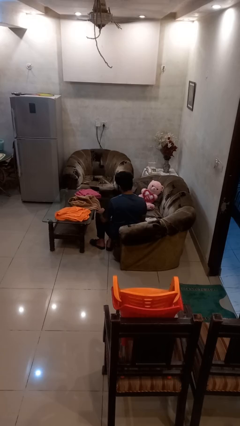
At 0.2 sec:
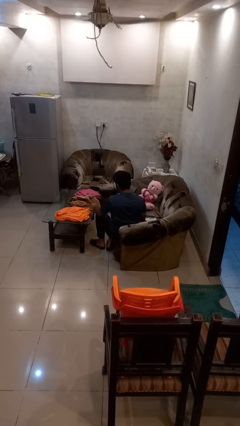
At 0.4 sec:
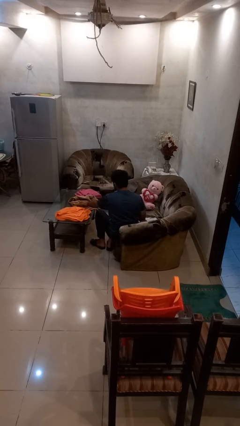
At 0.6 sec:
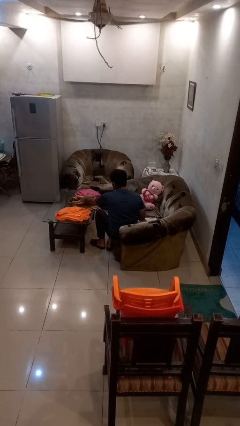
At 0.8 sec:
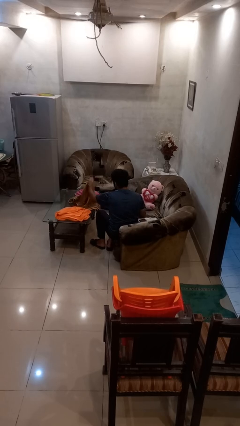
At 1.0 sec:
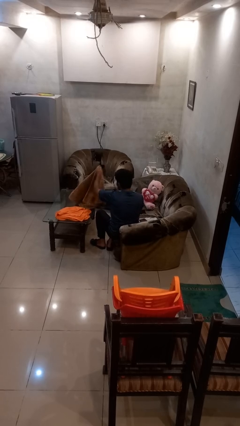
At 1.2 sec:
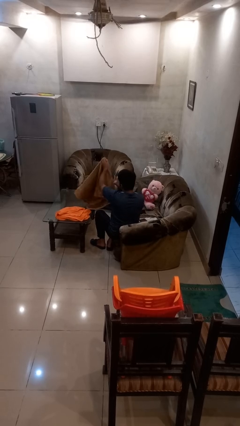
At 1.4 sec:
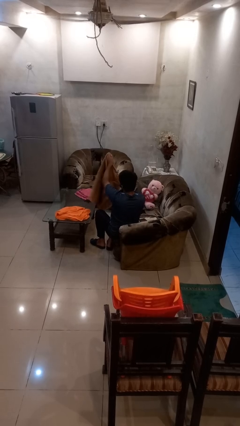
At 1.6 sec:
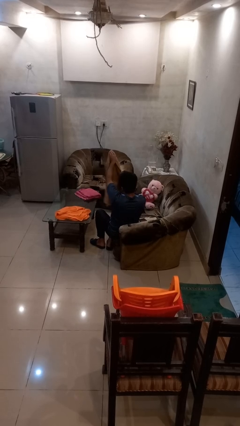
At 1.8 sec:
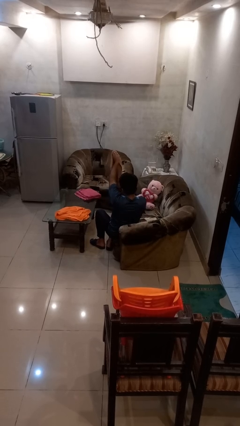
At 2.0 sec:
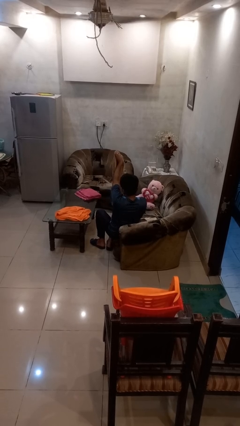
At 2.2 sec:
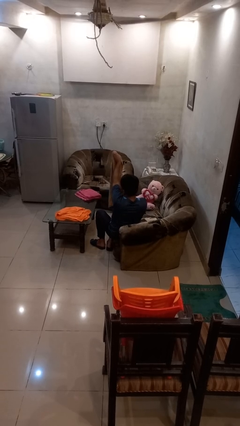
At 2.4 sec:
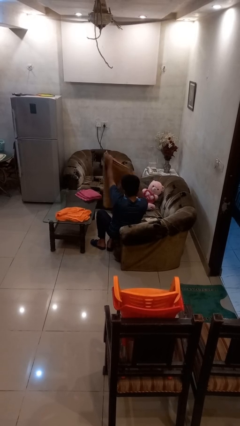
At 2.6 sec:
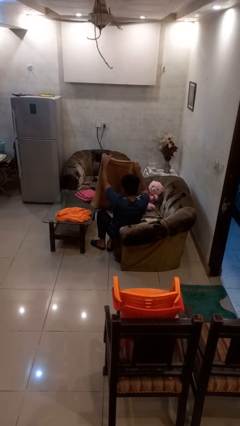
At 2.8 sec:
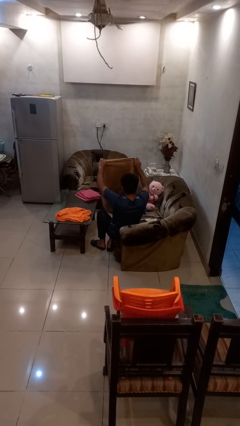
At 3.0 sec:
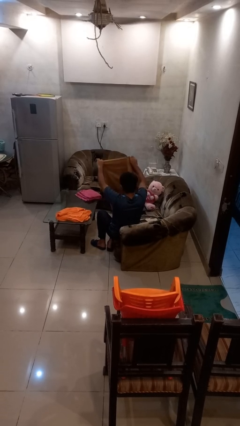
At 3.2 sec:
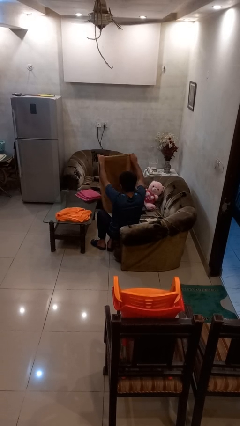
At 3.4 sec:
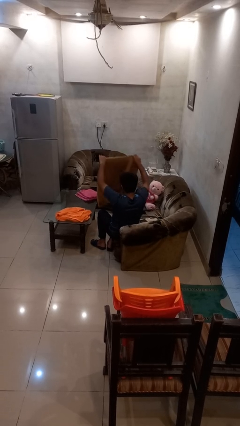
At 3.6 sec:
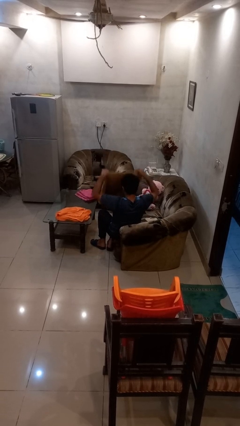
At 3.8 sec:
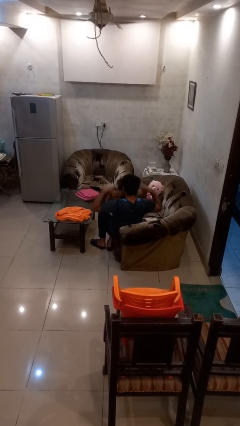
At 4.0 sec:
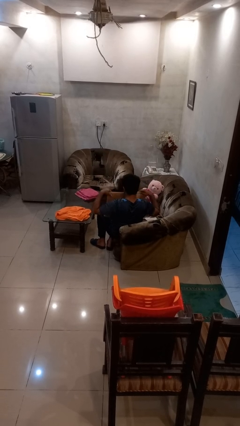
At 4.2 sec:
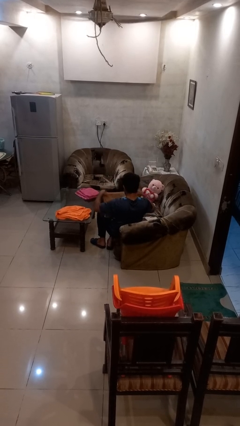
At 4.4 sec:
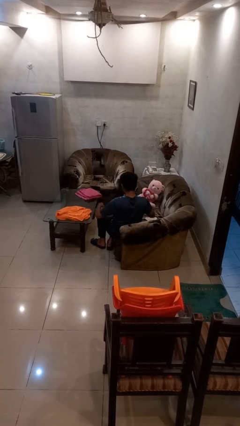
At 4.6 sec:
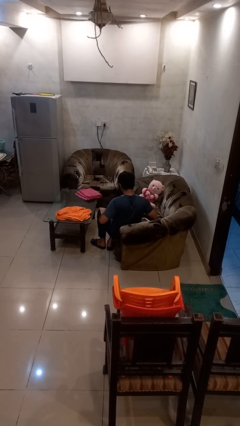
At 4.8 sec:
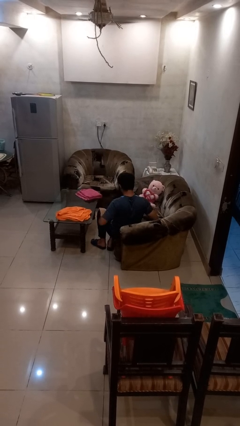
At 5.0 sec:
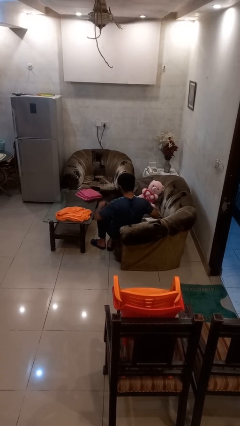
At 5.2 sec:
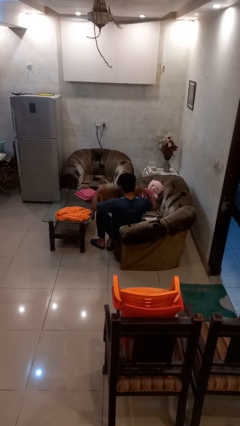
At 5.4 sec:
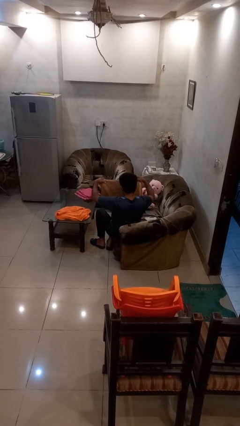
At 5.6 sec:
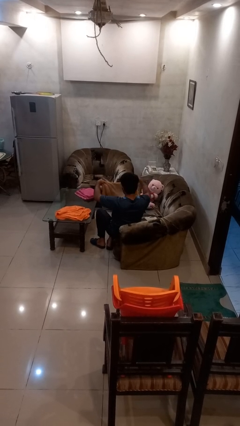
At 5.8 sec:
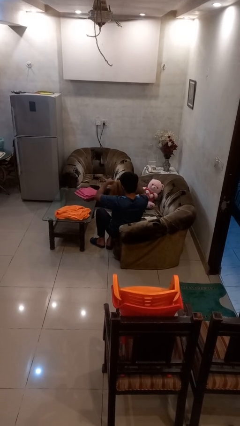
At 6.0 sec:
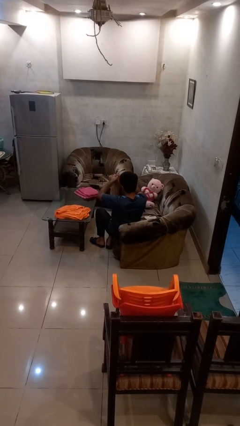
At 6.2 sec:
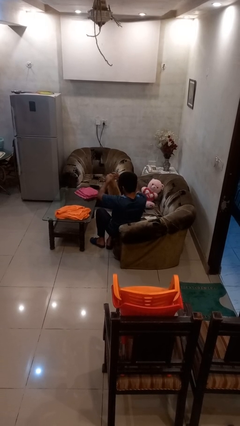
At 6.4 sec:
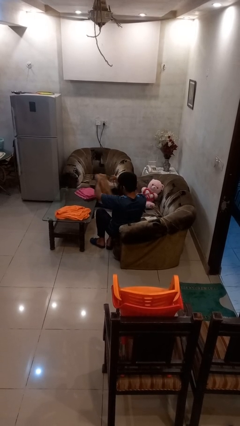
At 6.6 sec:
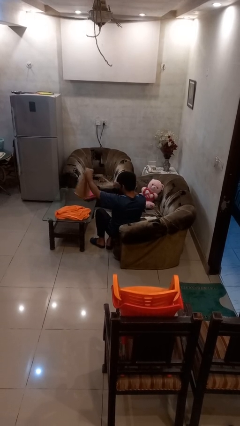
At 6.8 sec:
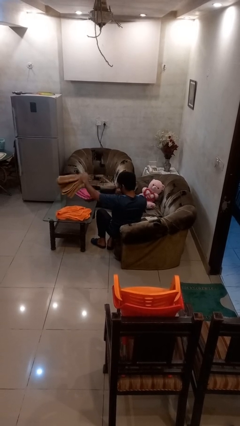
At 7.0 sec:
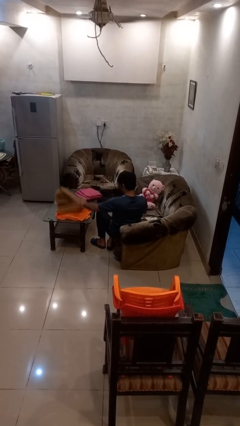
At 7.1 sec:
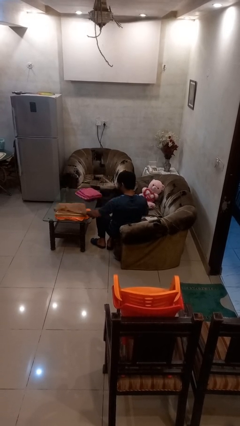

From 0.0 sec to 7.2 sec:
person folds towel

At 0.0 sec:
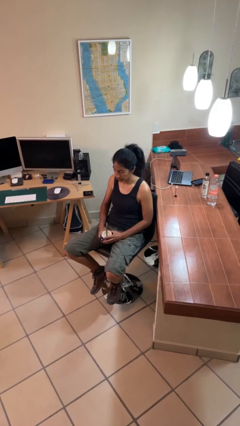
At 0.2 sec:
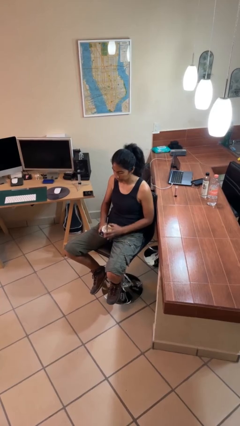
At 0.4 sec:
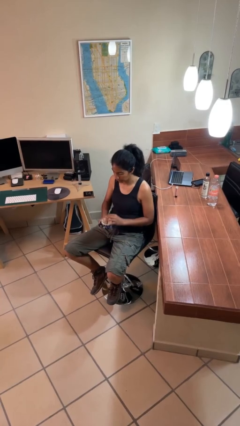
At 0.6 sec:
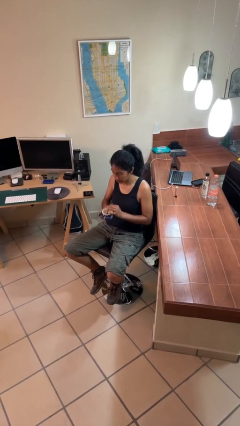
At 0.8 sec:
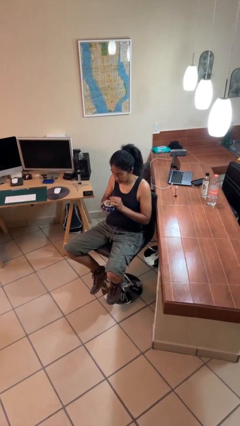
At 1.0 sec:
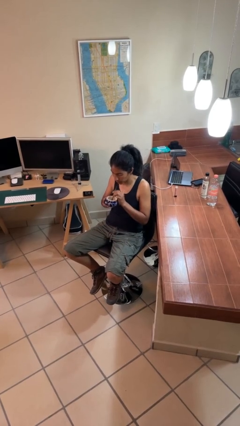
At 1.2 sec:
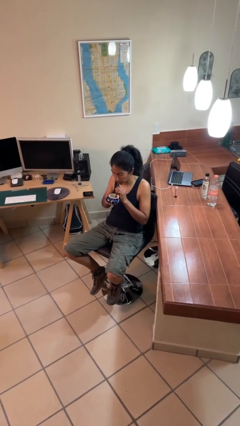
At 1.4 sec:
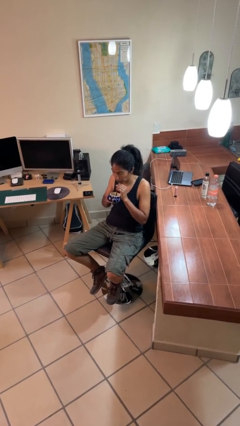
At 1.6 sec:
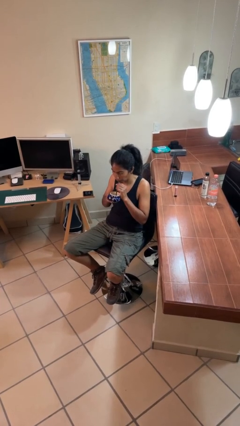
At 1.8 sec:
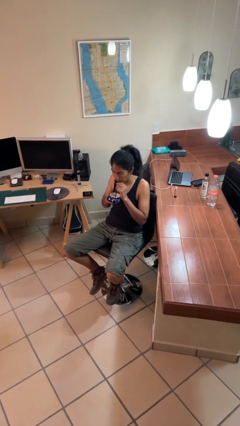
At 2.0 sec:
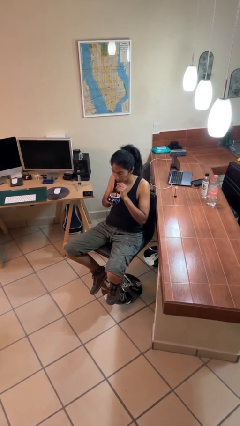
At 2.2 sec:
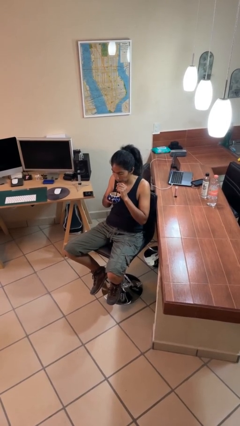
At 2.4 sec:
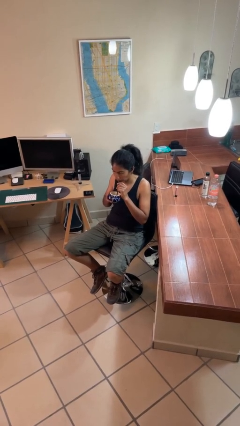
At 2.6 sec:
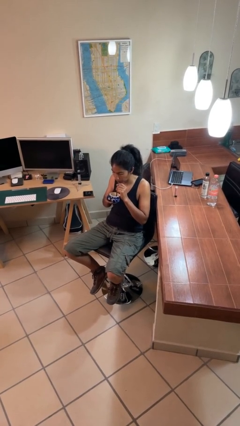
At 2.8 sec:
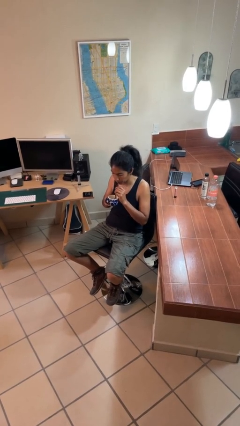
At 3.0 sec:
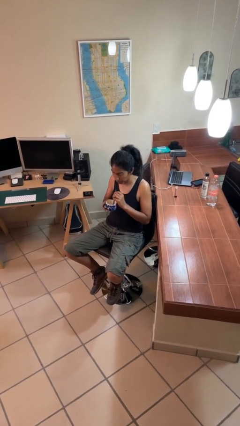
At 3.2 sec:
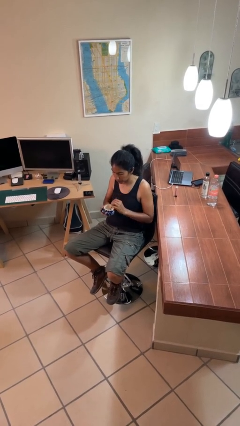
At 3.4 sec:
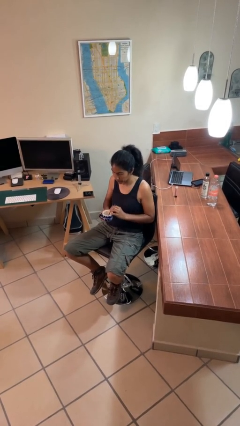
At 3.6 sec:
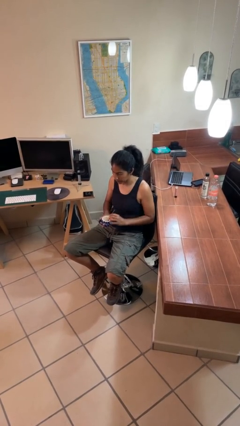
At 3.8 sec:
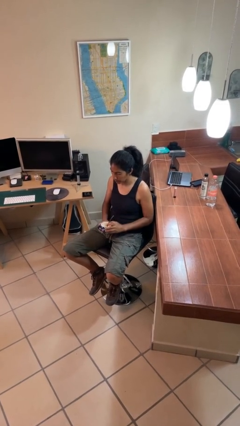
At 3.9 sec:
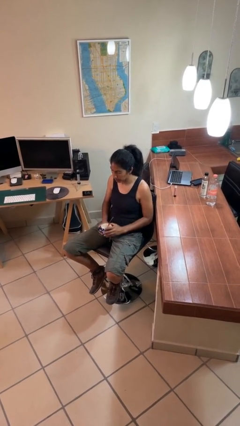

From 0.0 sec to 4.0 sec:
person drinks from straw

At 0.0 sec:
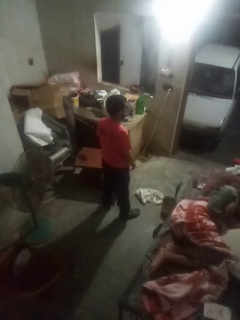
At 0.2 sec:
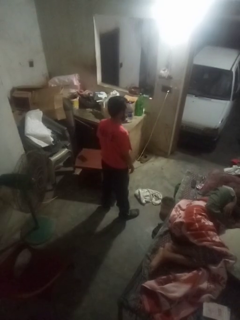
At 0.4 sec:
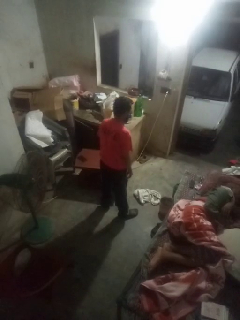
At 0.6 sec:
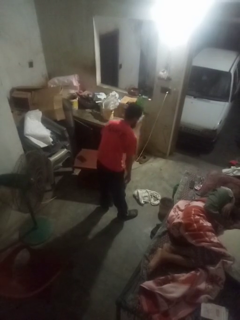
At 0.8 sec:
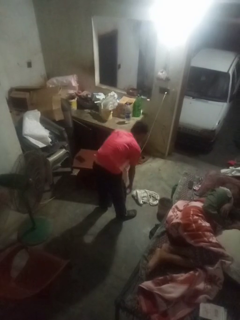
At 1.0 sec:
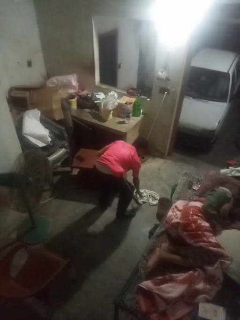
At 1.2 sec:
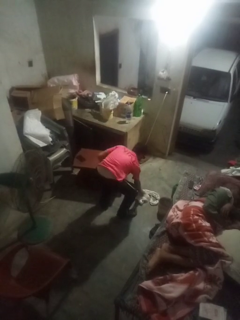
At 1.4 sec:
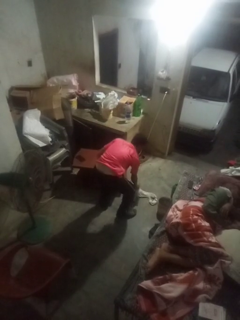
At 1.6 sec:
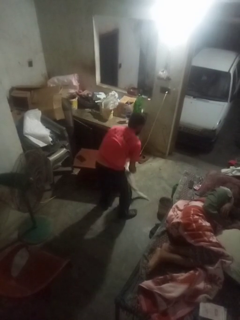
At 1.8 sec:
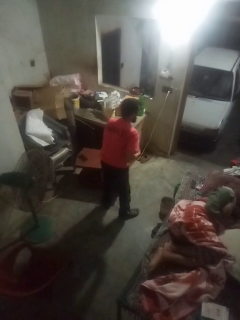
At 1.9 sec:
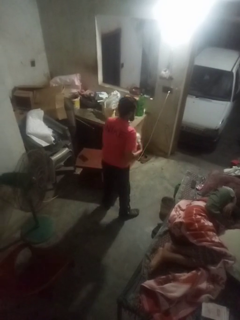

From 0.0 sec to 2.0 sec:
person picks up object from floor

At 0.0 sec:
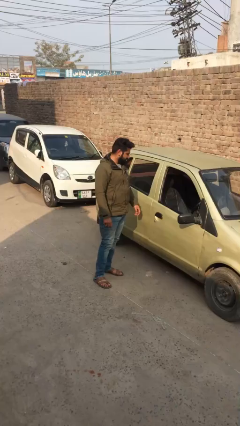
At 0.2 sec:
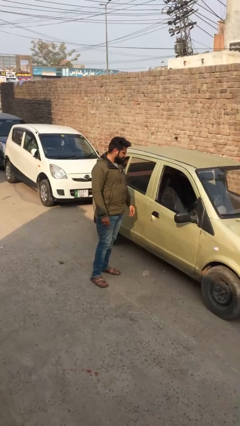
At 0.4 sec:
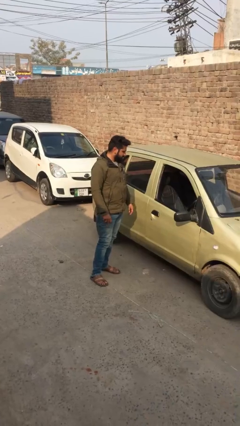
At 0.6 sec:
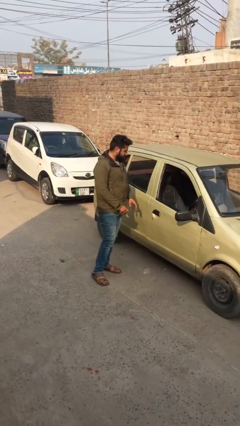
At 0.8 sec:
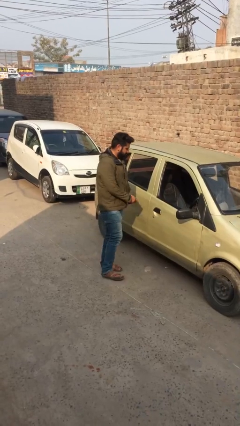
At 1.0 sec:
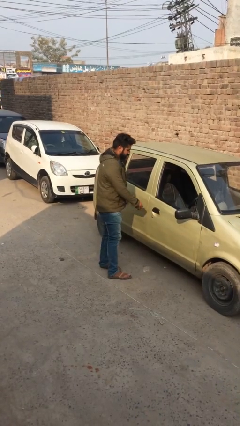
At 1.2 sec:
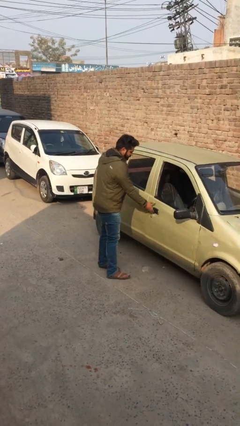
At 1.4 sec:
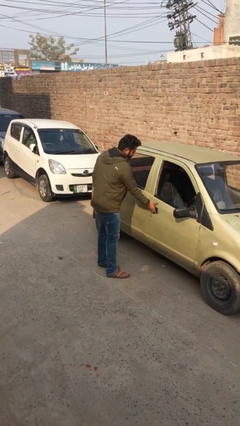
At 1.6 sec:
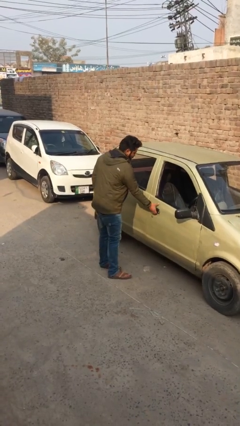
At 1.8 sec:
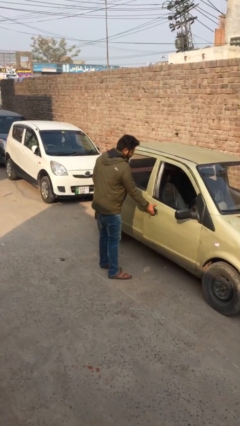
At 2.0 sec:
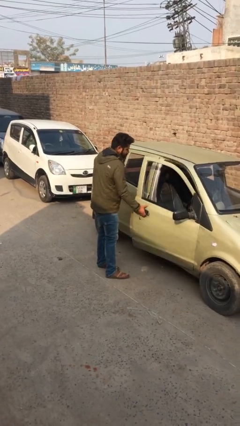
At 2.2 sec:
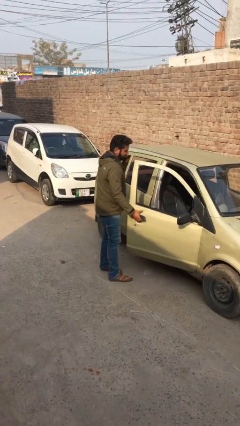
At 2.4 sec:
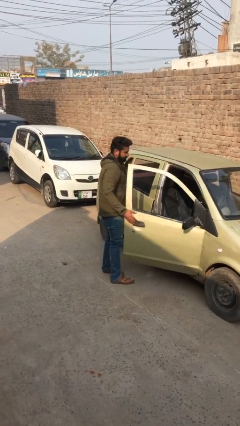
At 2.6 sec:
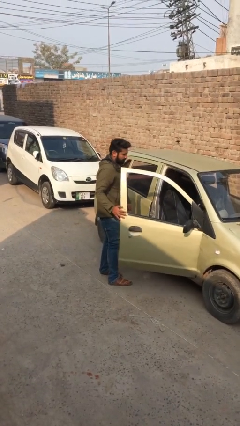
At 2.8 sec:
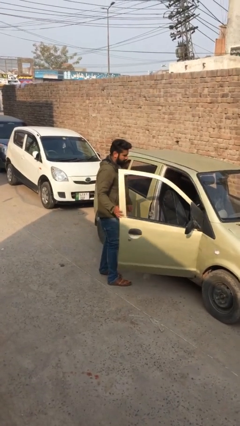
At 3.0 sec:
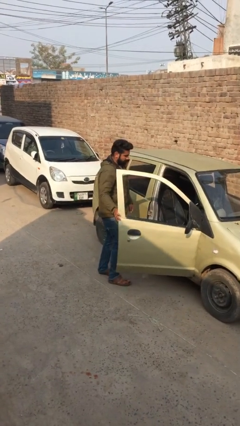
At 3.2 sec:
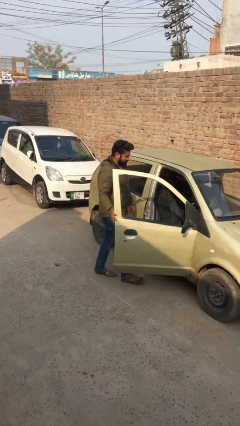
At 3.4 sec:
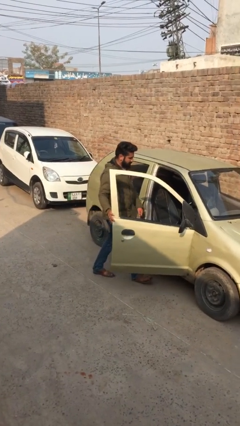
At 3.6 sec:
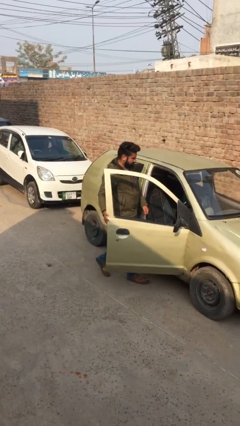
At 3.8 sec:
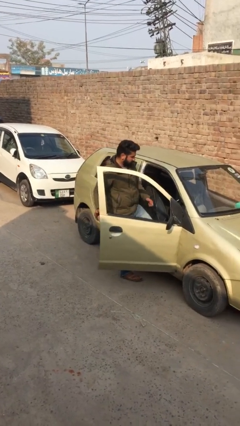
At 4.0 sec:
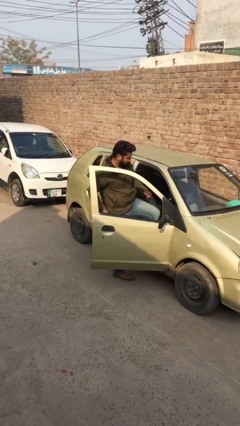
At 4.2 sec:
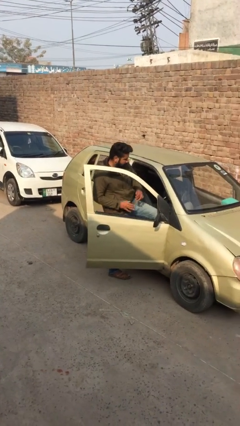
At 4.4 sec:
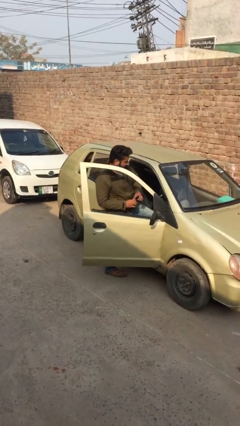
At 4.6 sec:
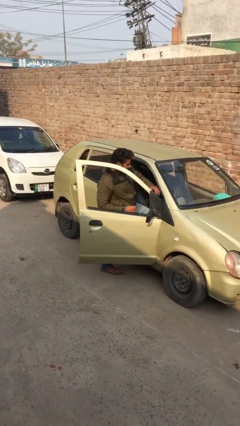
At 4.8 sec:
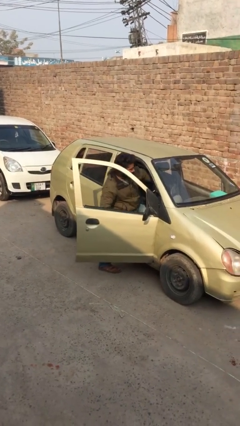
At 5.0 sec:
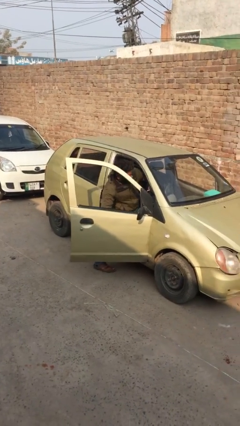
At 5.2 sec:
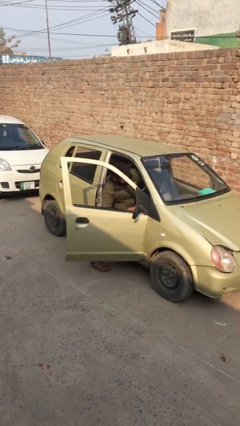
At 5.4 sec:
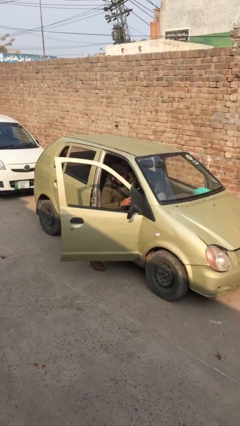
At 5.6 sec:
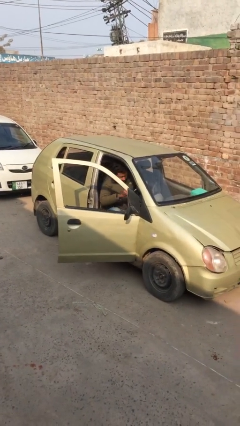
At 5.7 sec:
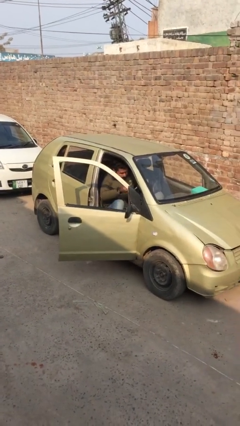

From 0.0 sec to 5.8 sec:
person enters car
